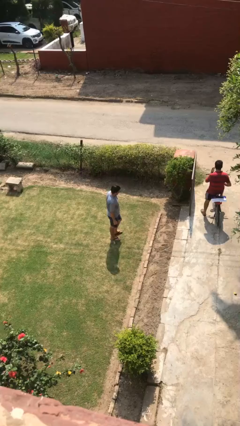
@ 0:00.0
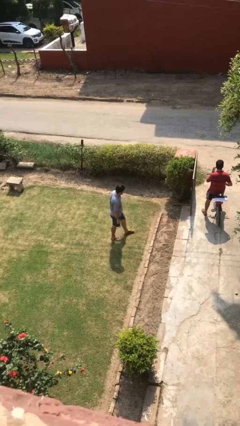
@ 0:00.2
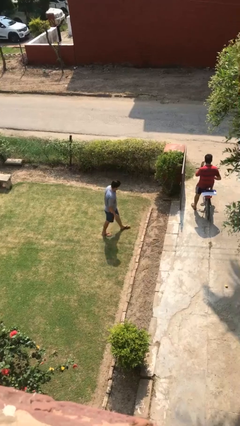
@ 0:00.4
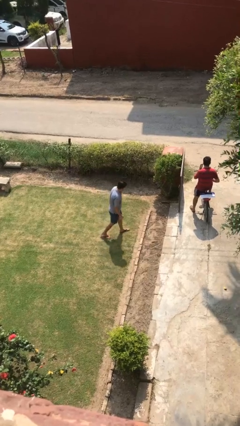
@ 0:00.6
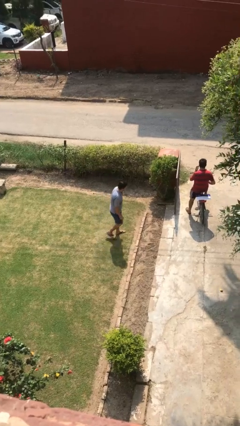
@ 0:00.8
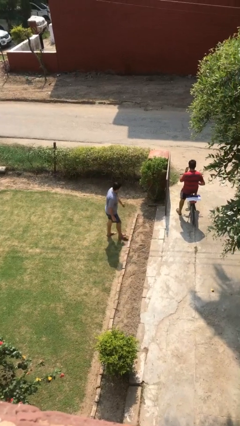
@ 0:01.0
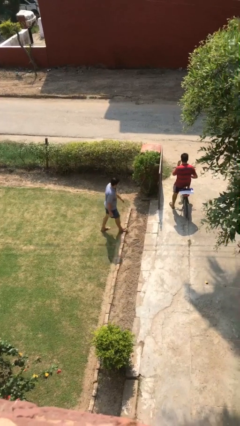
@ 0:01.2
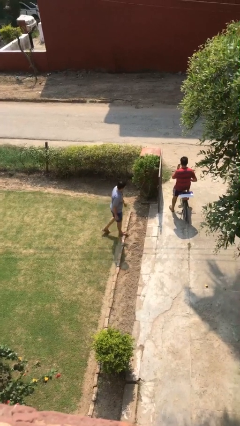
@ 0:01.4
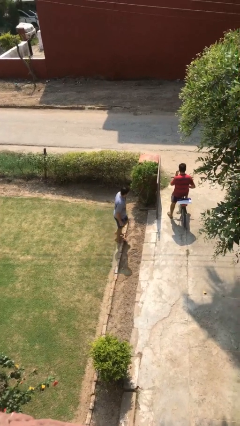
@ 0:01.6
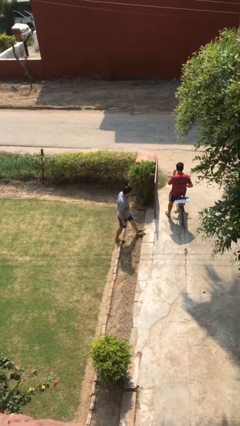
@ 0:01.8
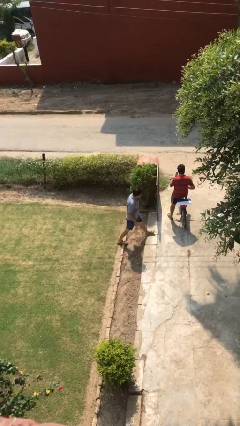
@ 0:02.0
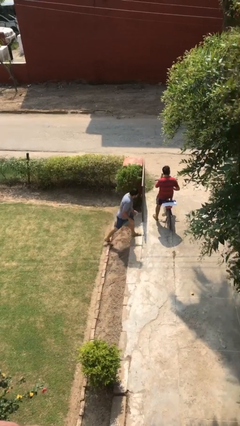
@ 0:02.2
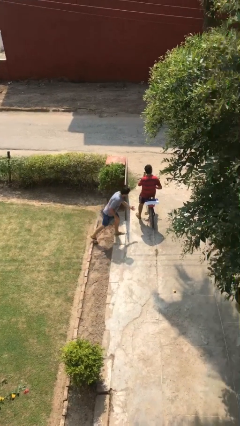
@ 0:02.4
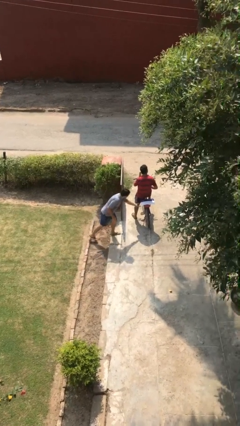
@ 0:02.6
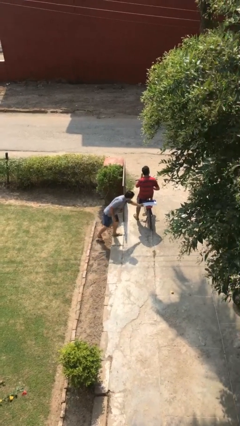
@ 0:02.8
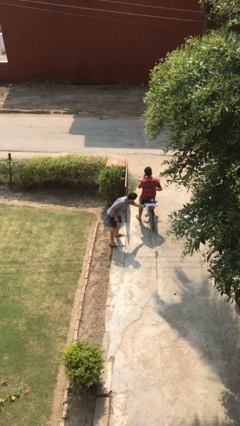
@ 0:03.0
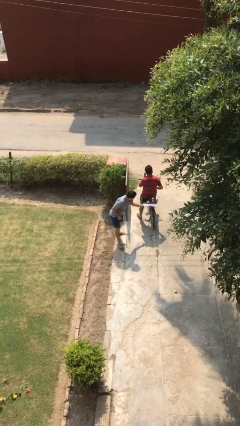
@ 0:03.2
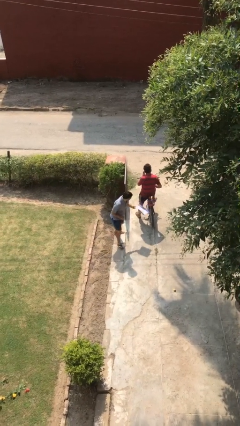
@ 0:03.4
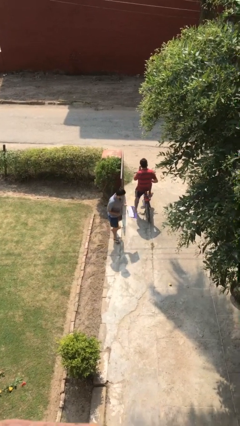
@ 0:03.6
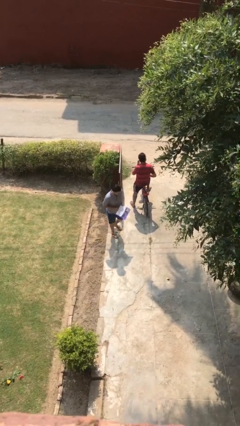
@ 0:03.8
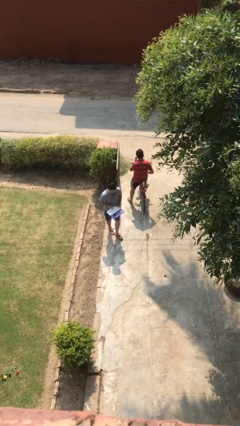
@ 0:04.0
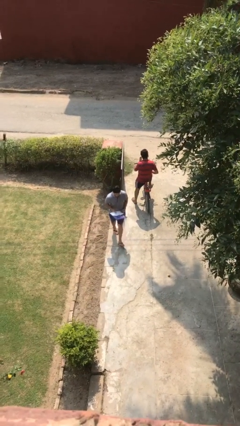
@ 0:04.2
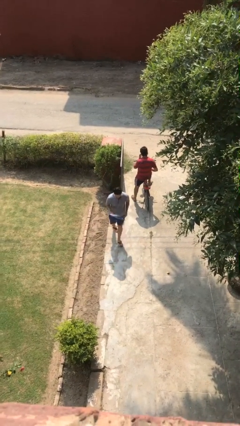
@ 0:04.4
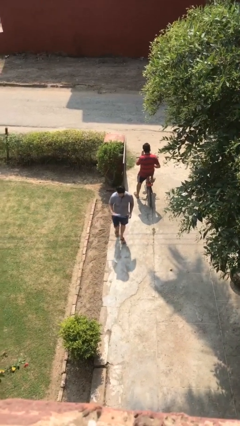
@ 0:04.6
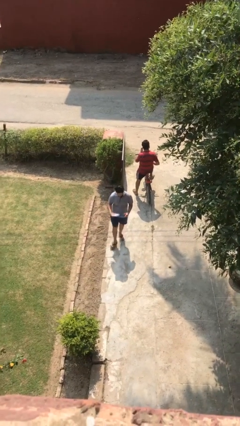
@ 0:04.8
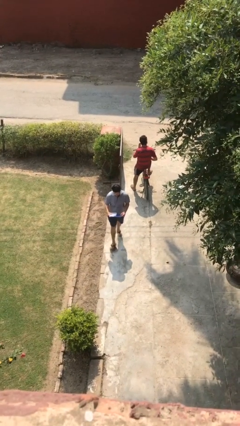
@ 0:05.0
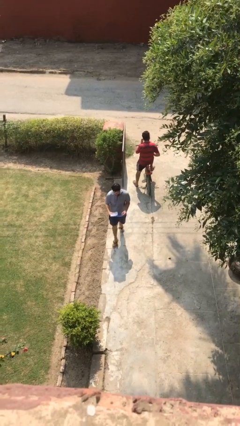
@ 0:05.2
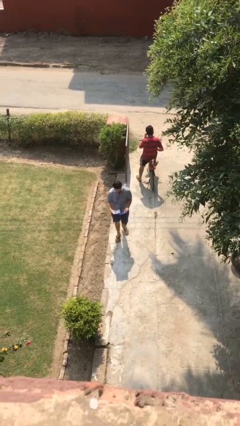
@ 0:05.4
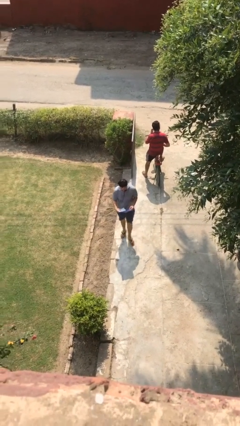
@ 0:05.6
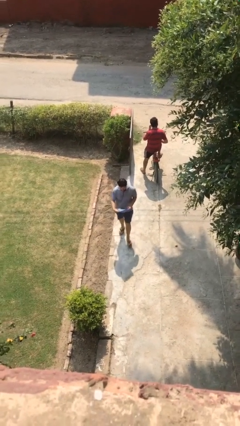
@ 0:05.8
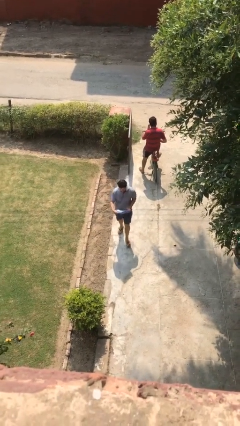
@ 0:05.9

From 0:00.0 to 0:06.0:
person steals object from person

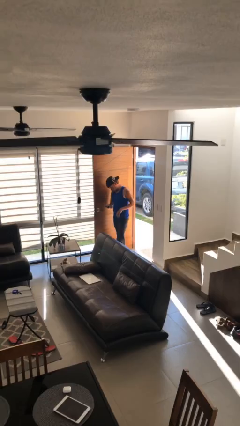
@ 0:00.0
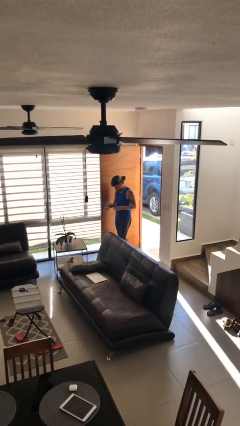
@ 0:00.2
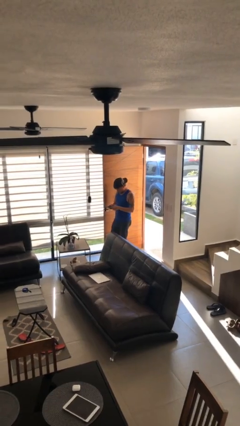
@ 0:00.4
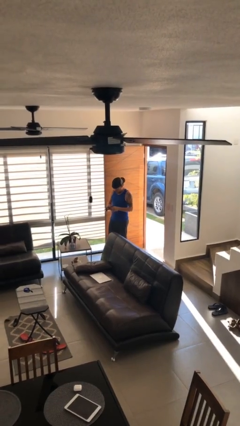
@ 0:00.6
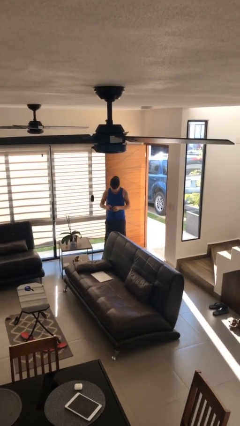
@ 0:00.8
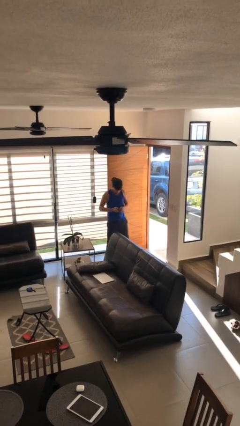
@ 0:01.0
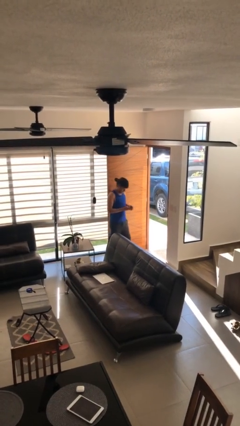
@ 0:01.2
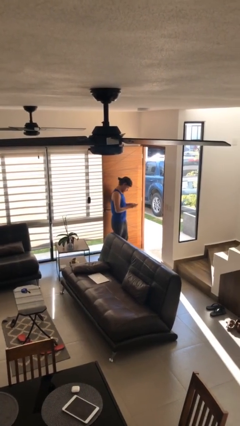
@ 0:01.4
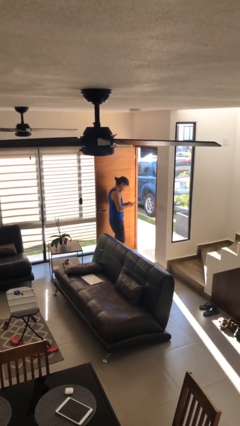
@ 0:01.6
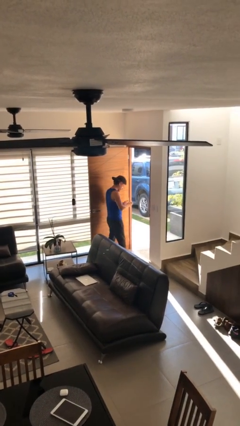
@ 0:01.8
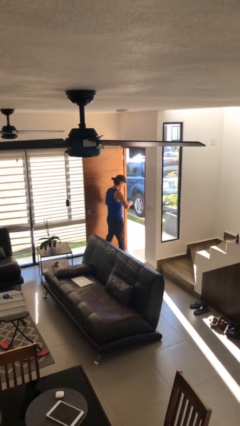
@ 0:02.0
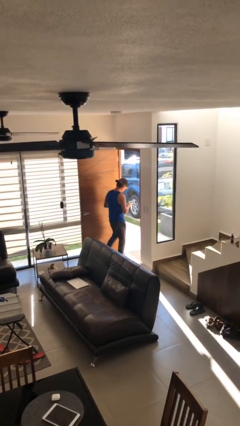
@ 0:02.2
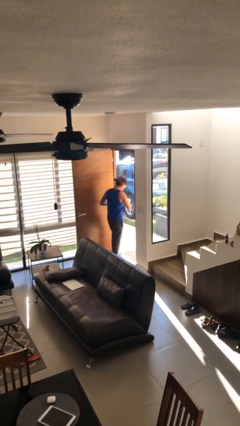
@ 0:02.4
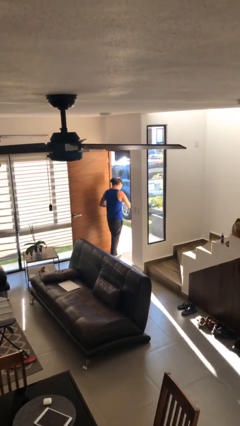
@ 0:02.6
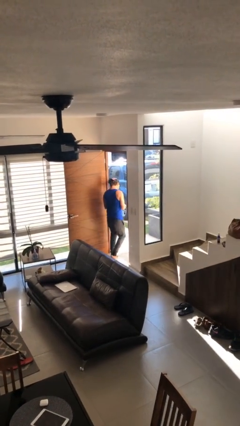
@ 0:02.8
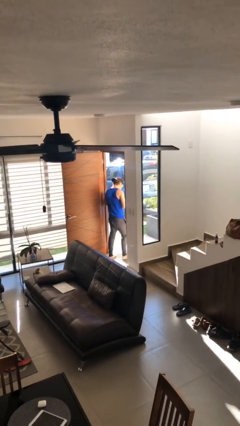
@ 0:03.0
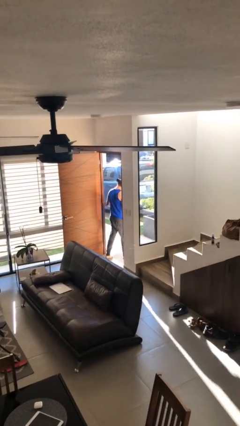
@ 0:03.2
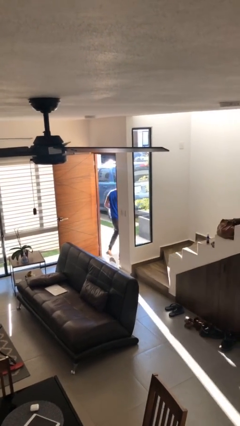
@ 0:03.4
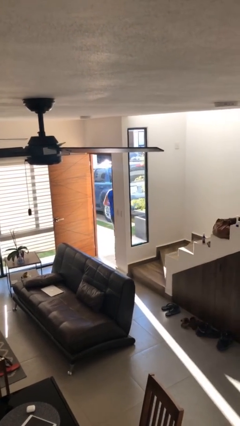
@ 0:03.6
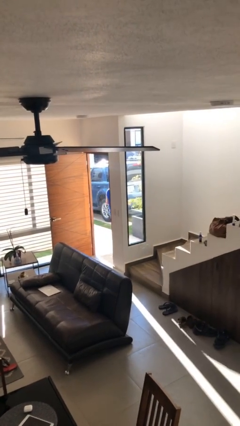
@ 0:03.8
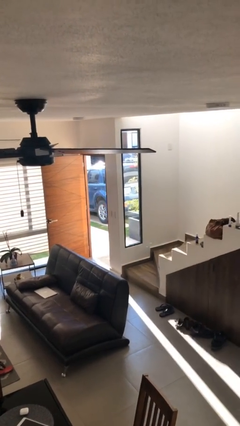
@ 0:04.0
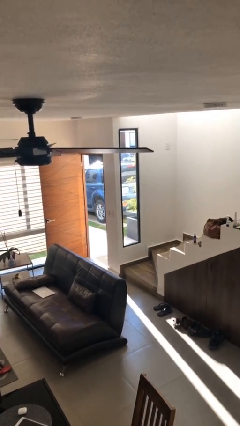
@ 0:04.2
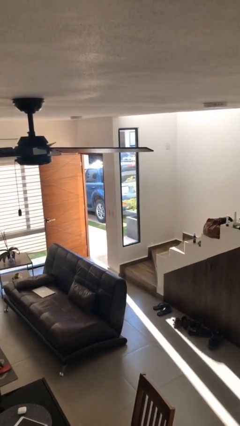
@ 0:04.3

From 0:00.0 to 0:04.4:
person exits scene through structure

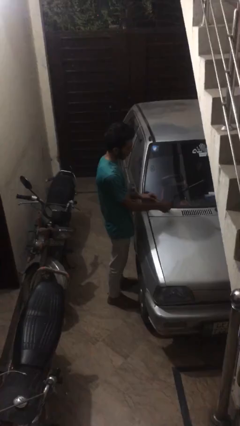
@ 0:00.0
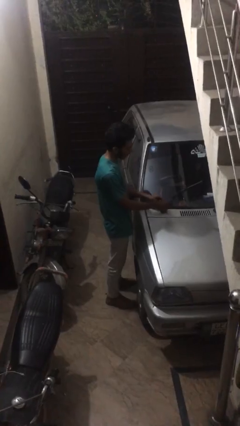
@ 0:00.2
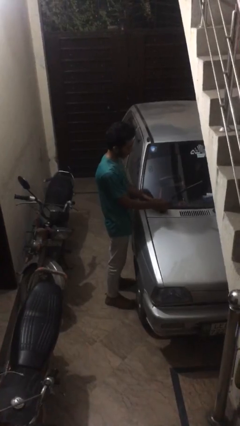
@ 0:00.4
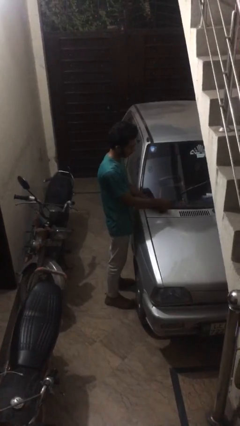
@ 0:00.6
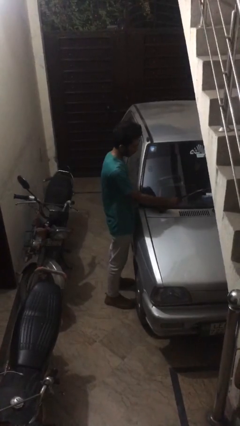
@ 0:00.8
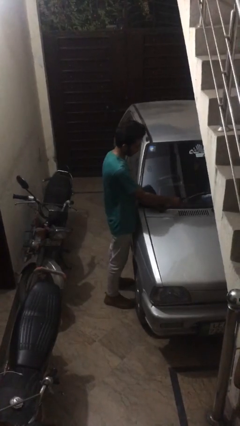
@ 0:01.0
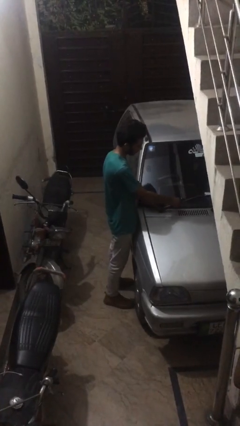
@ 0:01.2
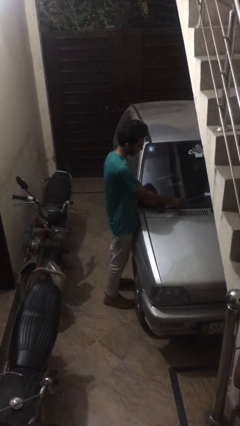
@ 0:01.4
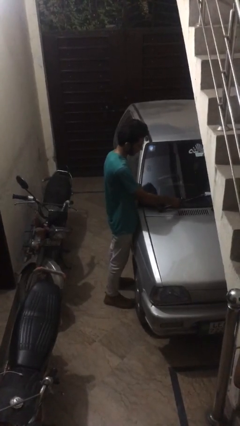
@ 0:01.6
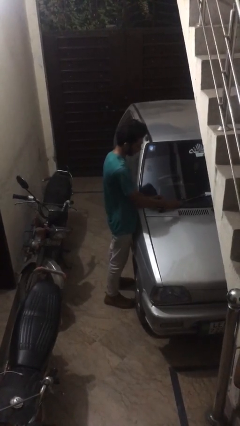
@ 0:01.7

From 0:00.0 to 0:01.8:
person flips down car wipers

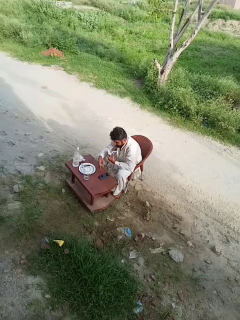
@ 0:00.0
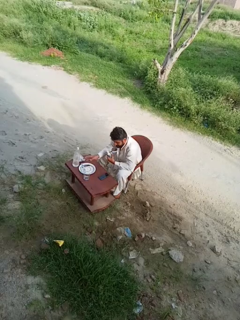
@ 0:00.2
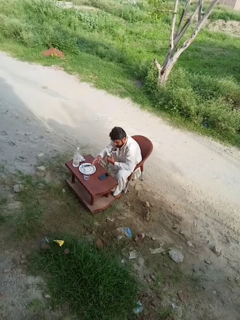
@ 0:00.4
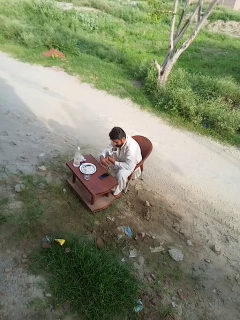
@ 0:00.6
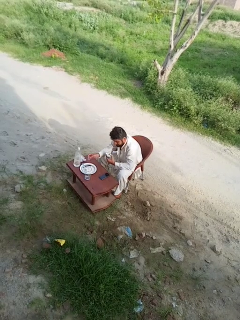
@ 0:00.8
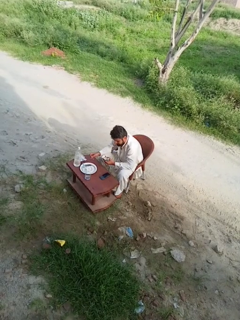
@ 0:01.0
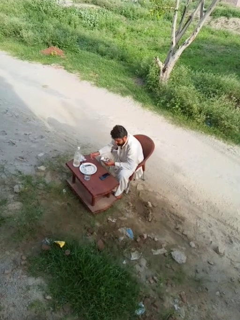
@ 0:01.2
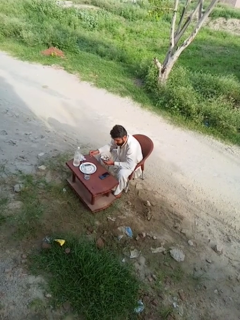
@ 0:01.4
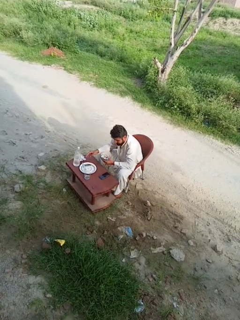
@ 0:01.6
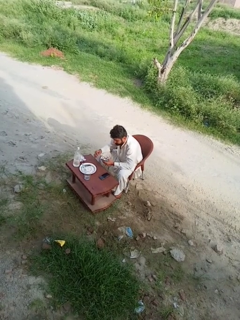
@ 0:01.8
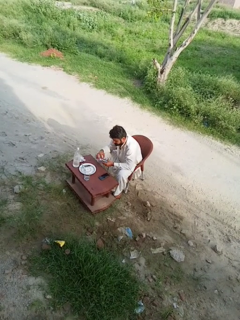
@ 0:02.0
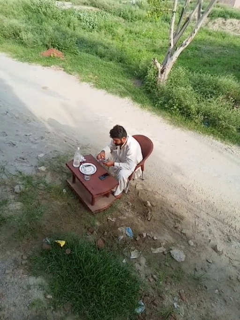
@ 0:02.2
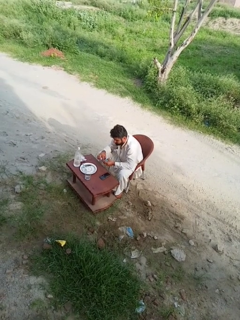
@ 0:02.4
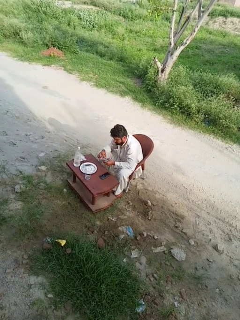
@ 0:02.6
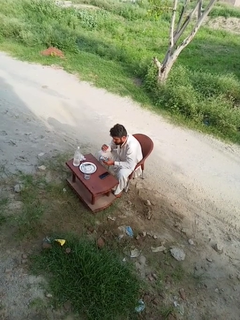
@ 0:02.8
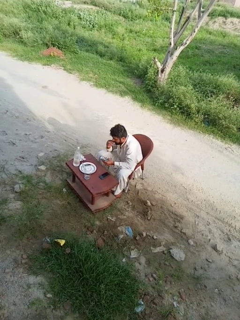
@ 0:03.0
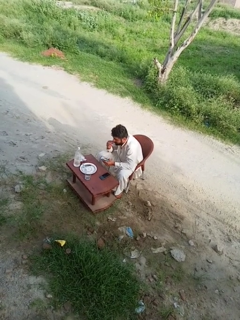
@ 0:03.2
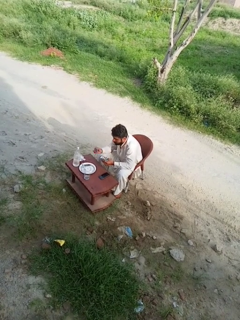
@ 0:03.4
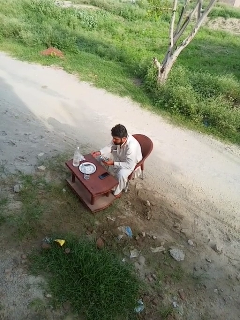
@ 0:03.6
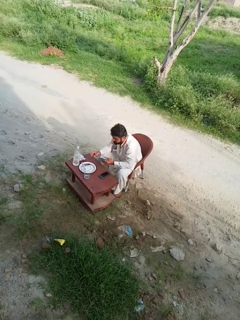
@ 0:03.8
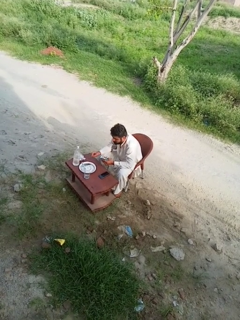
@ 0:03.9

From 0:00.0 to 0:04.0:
person eats with hands

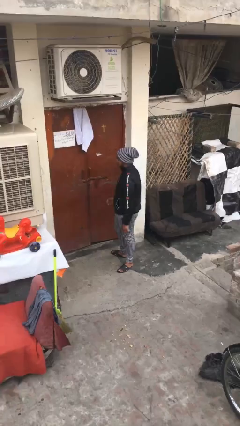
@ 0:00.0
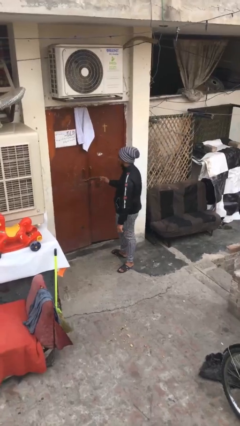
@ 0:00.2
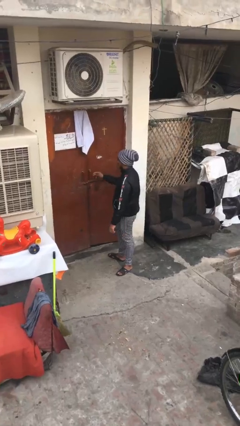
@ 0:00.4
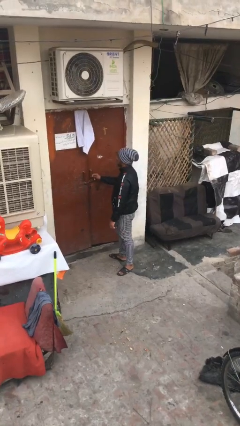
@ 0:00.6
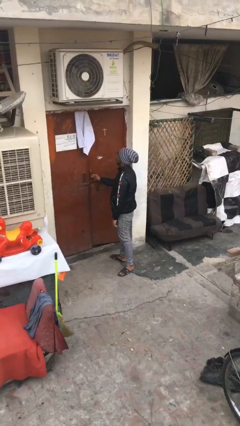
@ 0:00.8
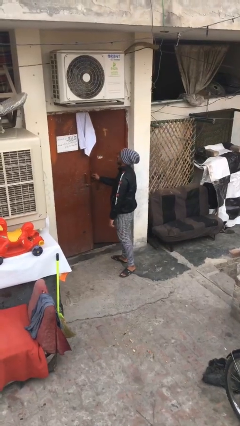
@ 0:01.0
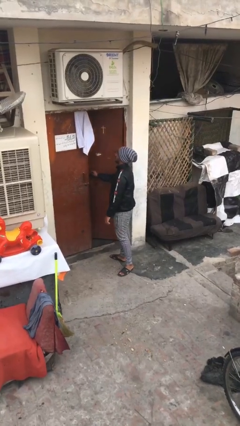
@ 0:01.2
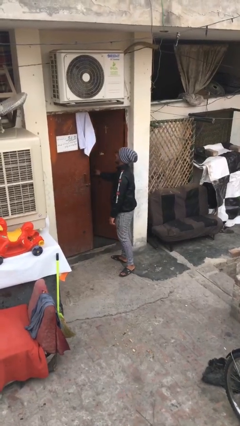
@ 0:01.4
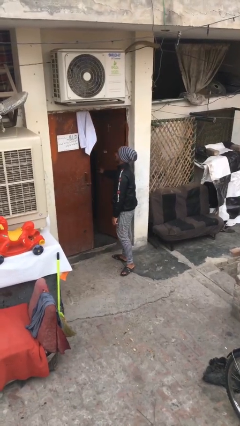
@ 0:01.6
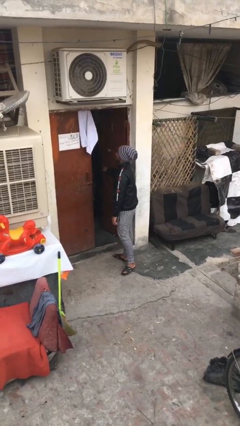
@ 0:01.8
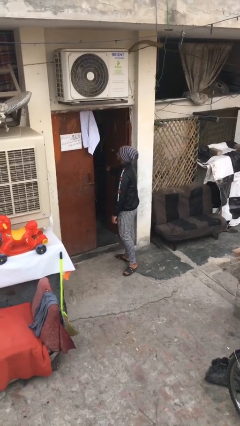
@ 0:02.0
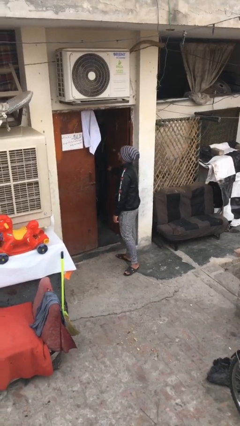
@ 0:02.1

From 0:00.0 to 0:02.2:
person opens facility door

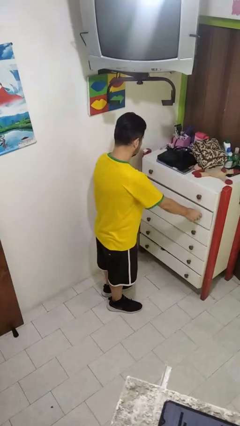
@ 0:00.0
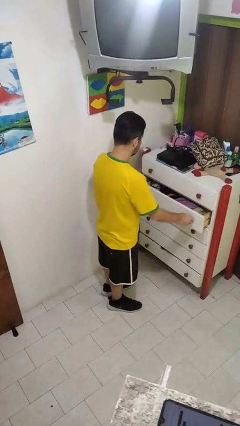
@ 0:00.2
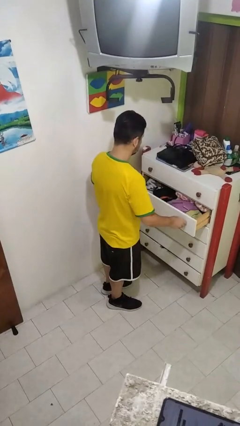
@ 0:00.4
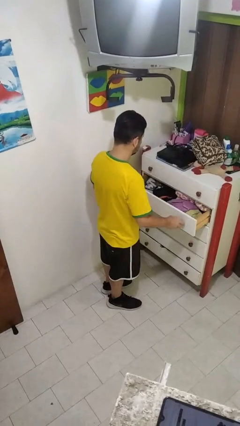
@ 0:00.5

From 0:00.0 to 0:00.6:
person opens dresser drawer
